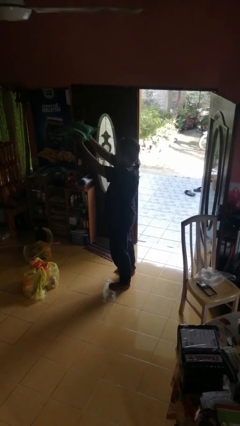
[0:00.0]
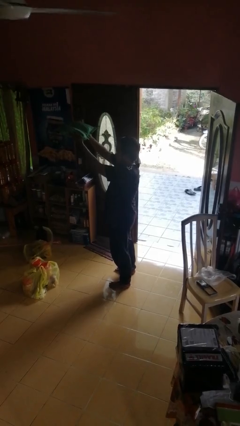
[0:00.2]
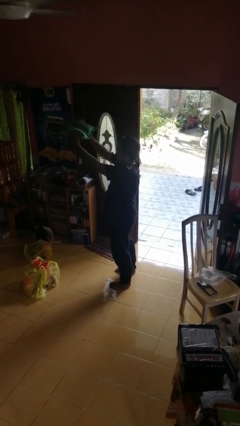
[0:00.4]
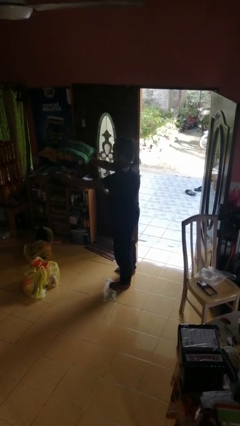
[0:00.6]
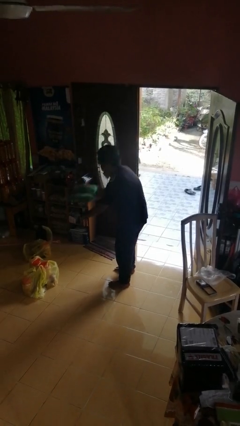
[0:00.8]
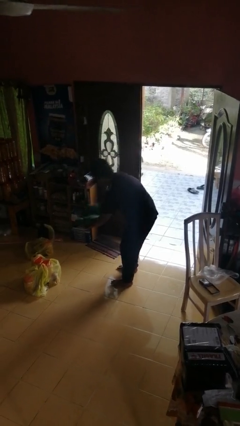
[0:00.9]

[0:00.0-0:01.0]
person drops object

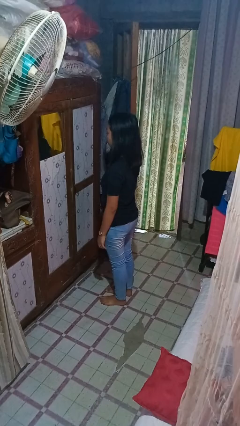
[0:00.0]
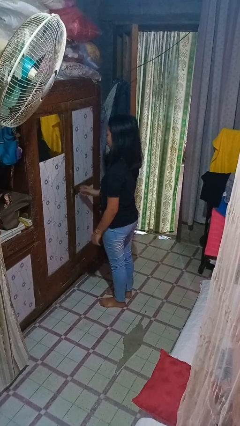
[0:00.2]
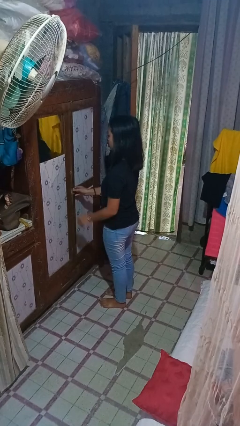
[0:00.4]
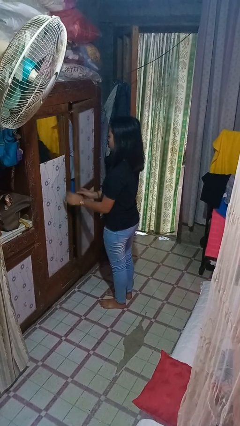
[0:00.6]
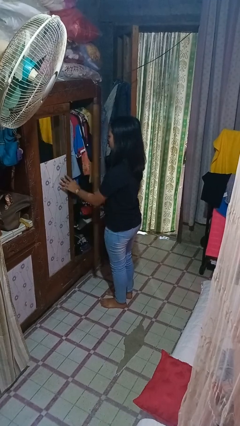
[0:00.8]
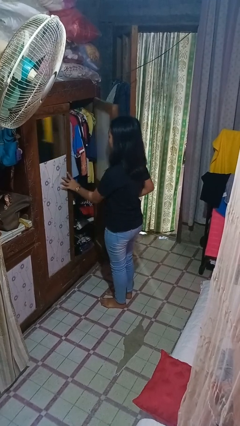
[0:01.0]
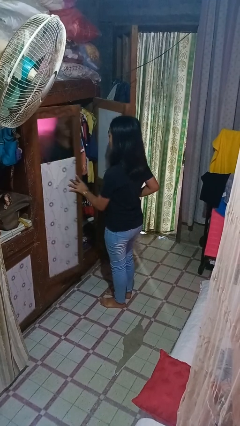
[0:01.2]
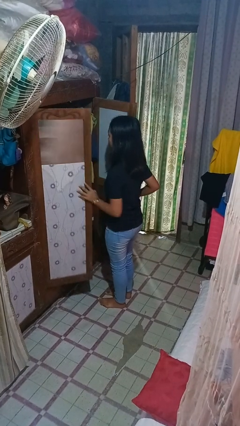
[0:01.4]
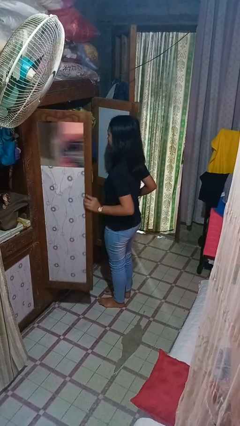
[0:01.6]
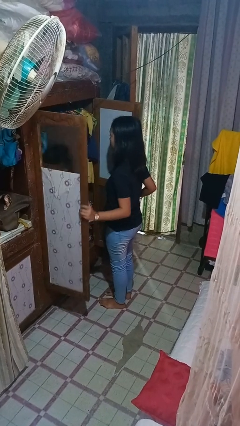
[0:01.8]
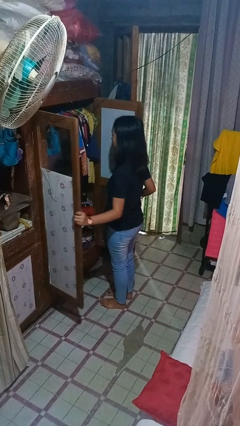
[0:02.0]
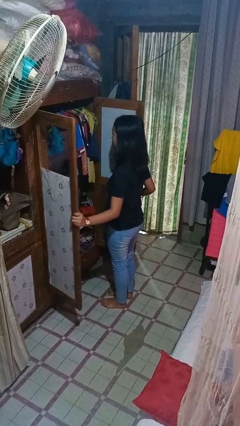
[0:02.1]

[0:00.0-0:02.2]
person opens closet door

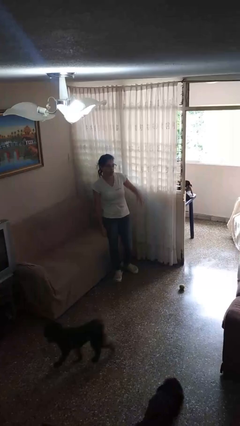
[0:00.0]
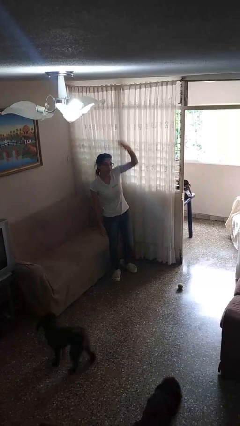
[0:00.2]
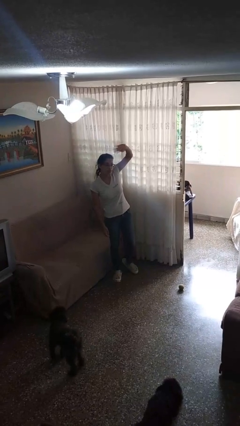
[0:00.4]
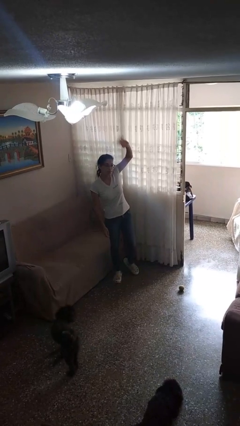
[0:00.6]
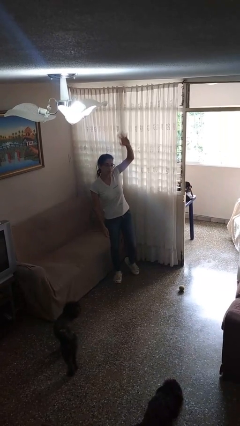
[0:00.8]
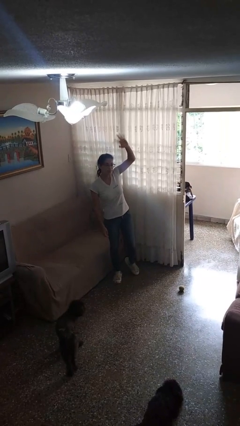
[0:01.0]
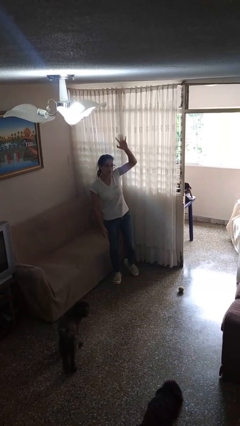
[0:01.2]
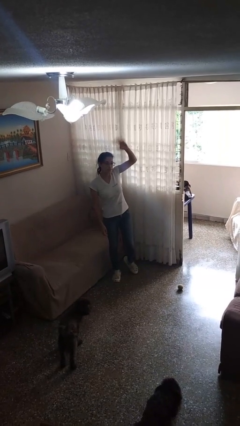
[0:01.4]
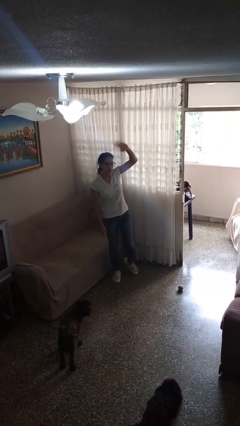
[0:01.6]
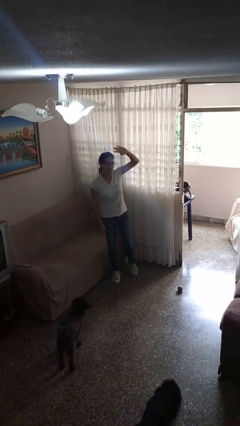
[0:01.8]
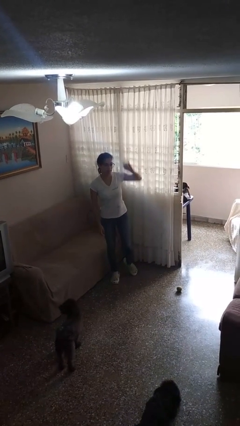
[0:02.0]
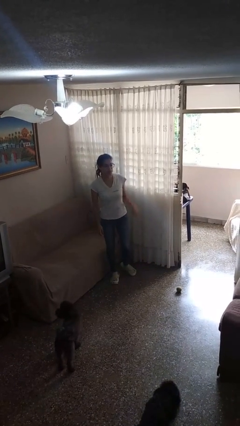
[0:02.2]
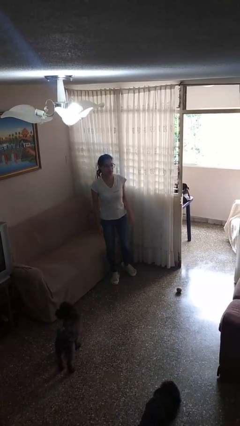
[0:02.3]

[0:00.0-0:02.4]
person waves at person

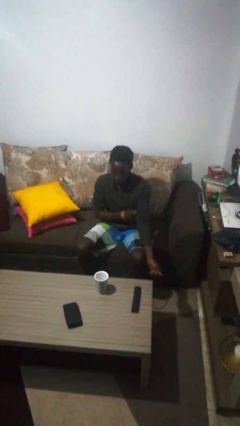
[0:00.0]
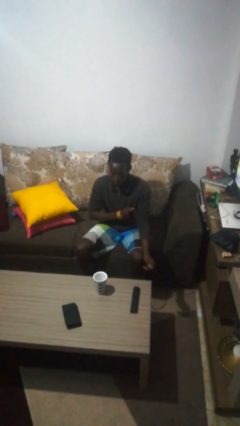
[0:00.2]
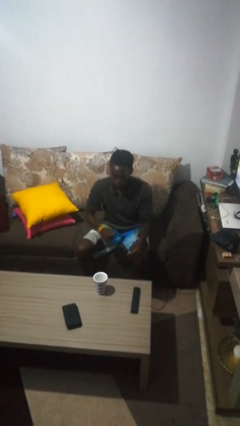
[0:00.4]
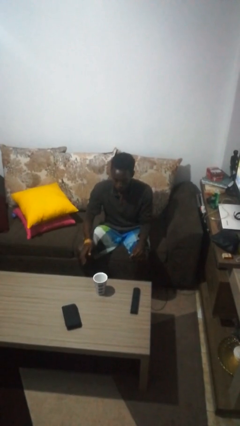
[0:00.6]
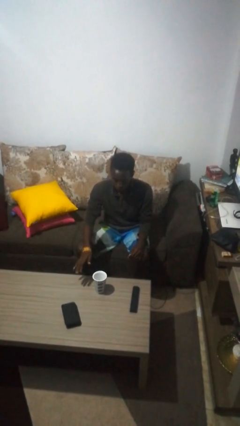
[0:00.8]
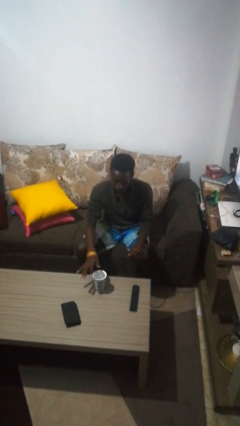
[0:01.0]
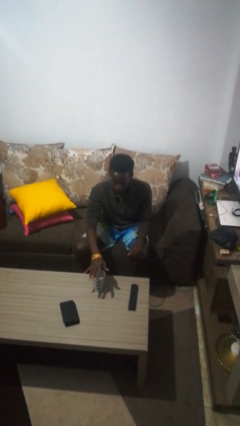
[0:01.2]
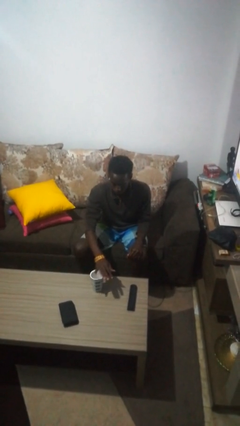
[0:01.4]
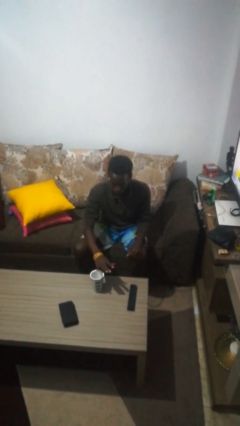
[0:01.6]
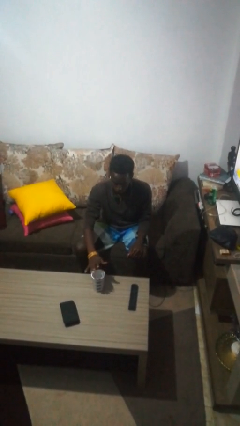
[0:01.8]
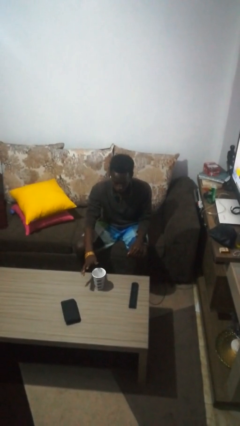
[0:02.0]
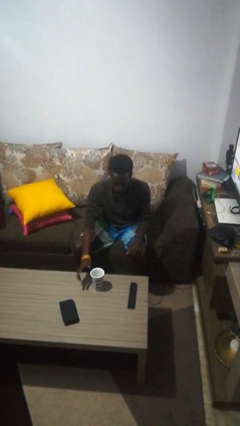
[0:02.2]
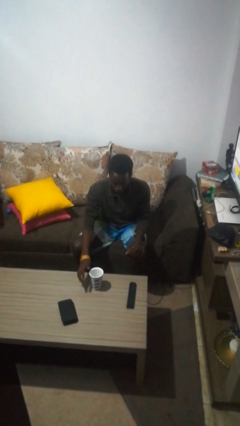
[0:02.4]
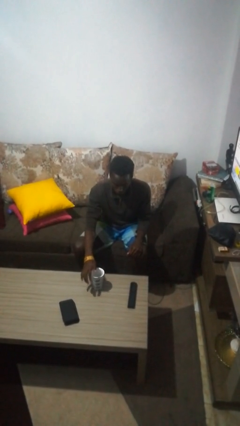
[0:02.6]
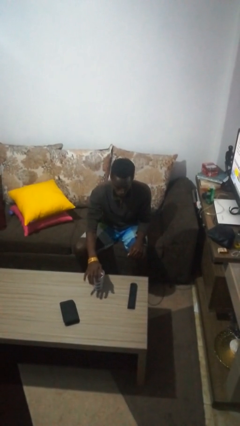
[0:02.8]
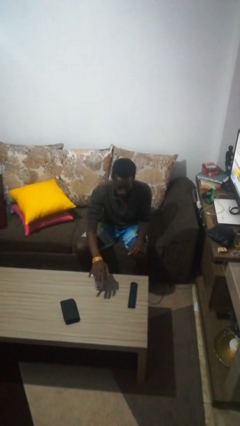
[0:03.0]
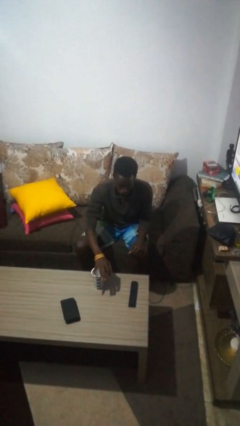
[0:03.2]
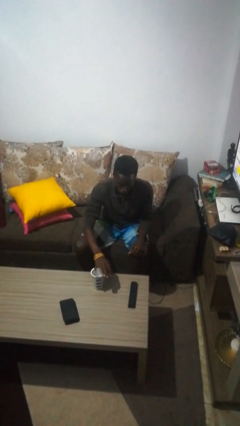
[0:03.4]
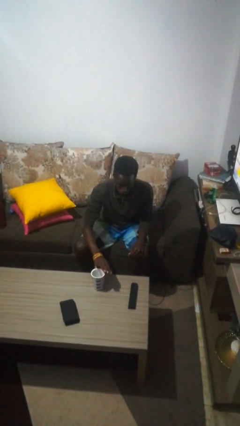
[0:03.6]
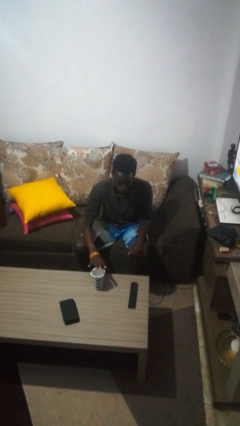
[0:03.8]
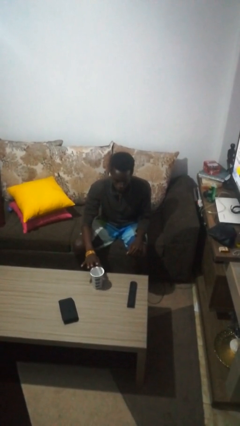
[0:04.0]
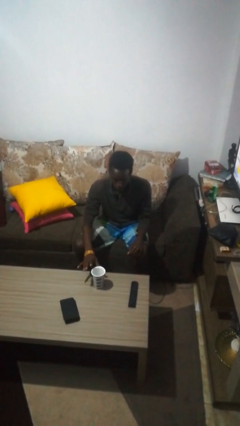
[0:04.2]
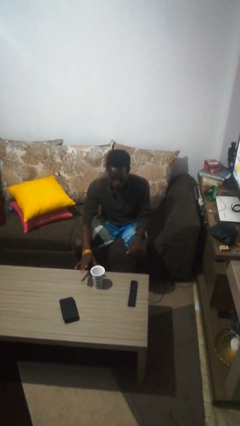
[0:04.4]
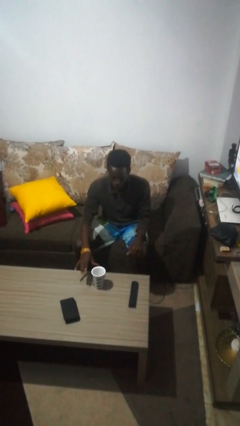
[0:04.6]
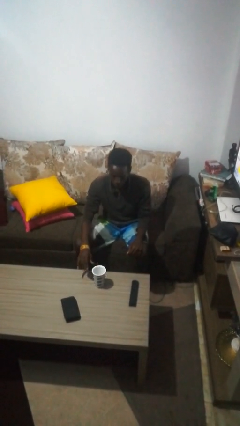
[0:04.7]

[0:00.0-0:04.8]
person waves hand over object

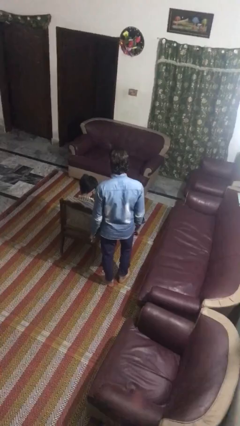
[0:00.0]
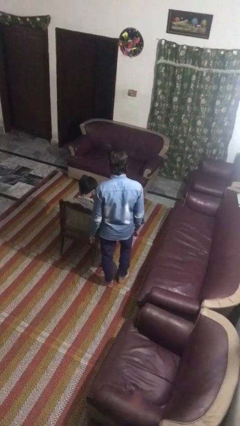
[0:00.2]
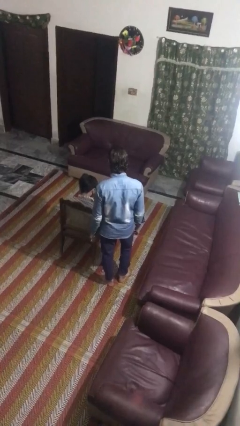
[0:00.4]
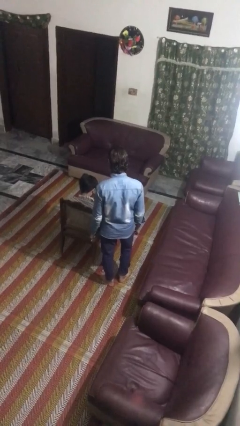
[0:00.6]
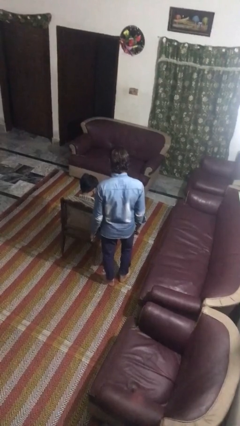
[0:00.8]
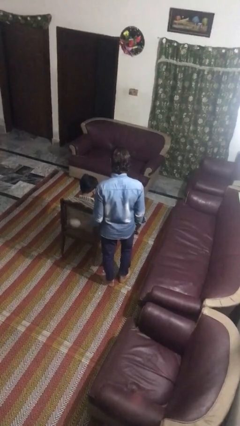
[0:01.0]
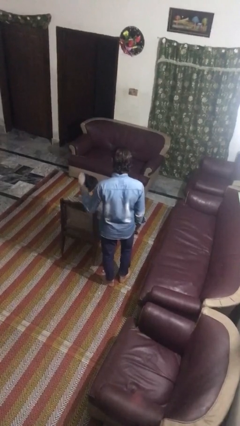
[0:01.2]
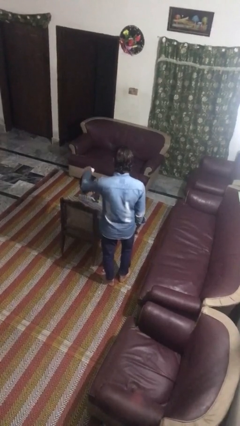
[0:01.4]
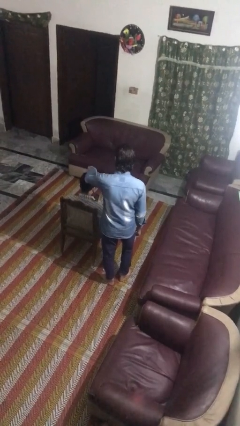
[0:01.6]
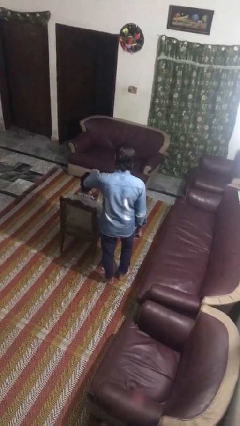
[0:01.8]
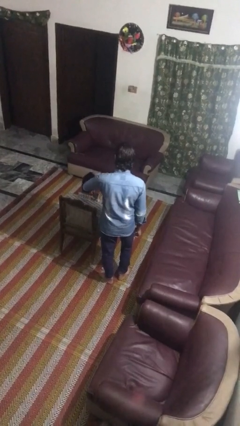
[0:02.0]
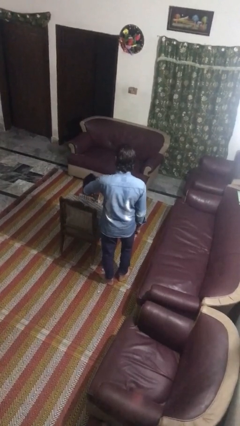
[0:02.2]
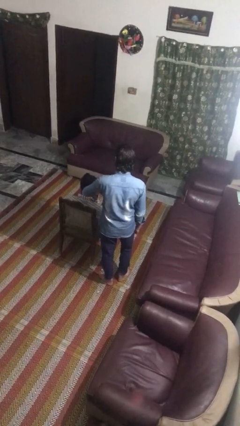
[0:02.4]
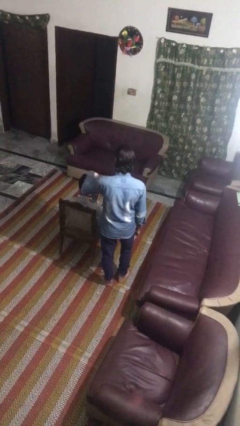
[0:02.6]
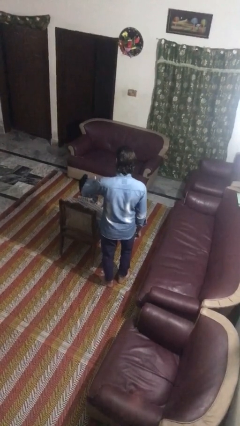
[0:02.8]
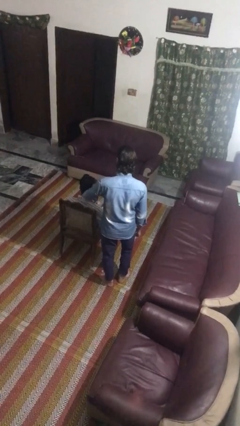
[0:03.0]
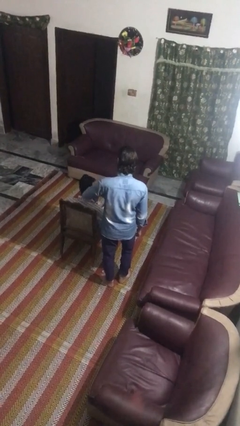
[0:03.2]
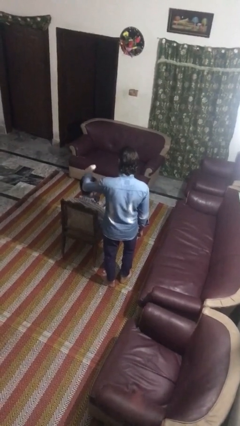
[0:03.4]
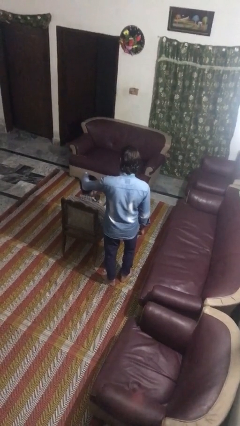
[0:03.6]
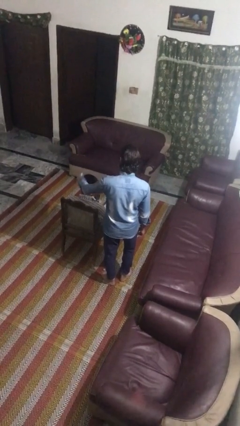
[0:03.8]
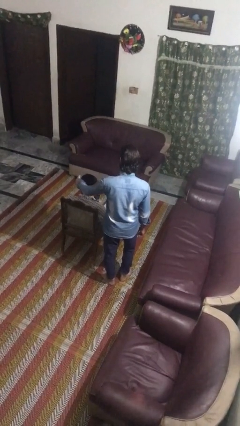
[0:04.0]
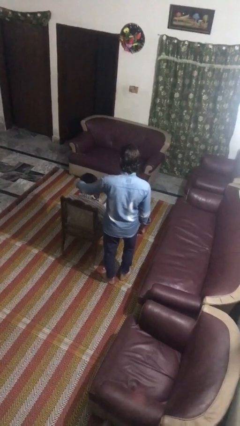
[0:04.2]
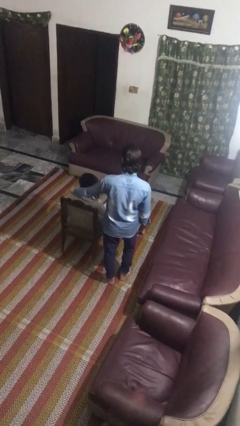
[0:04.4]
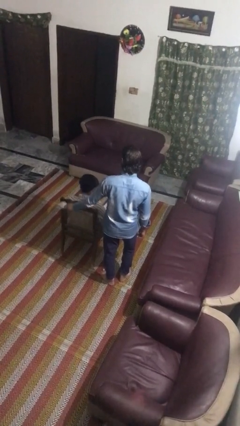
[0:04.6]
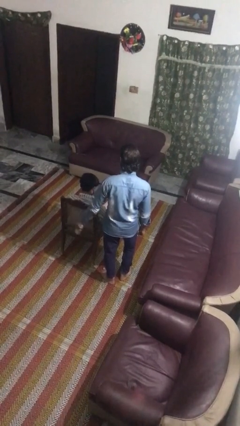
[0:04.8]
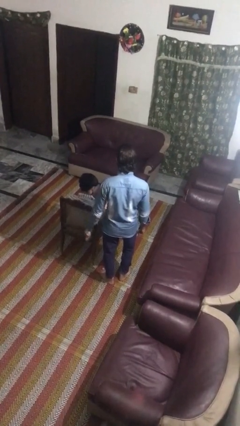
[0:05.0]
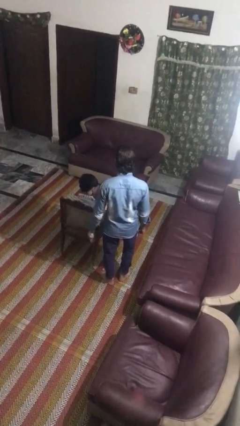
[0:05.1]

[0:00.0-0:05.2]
person brushes hair of person

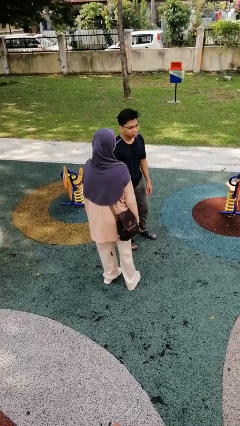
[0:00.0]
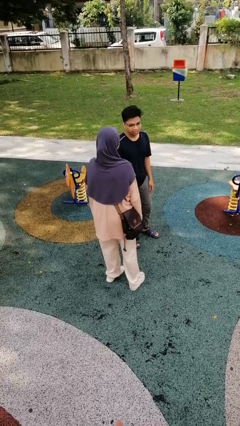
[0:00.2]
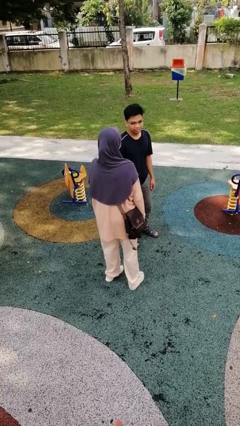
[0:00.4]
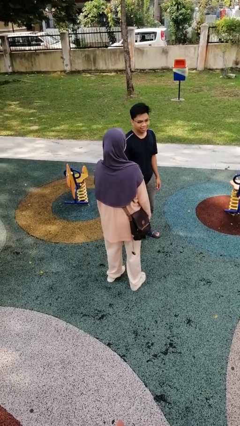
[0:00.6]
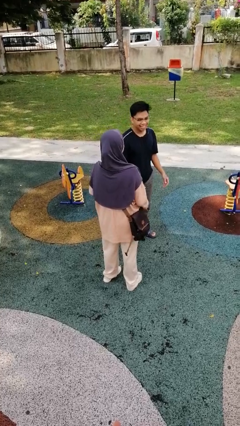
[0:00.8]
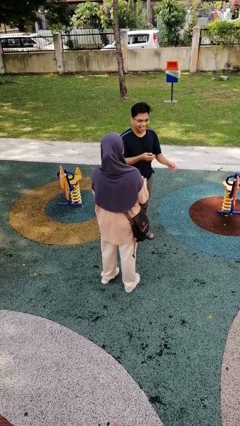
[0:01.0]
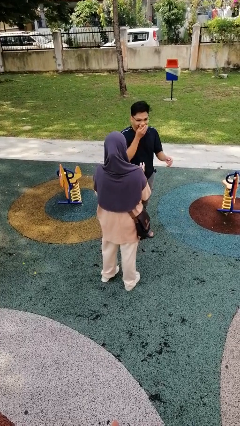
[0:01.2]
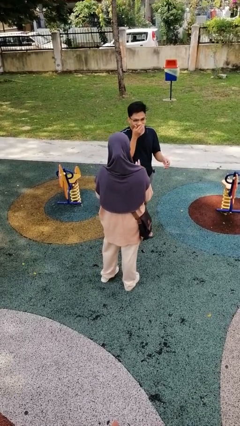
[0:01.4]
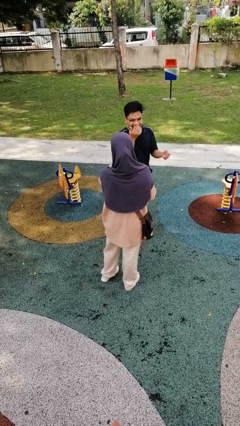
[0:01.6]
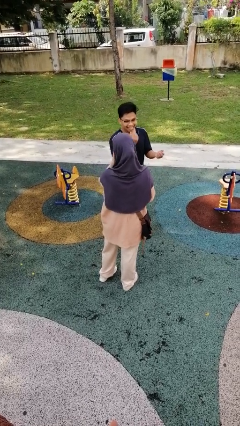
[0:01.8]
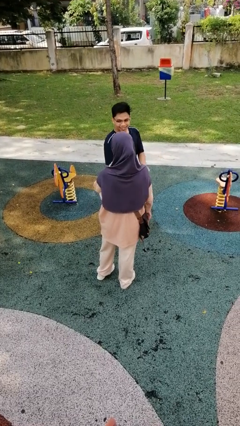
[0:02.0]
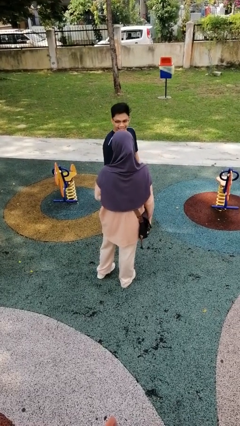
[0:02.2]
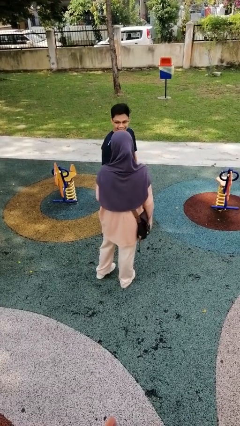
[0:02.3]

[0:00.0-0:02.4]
person laughs with person
